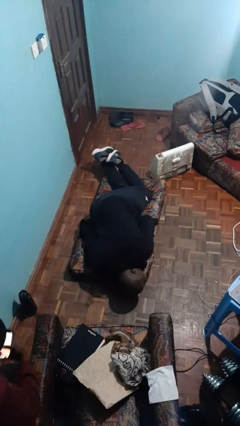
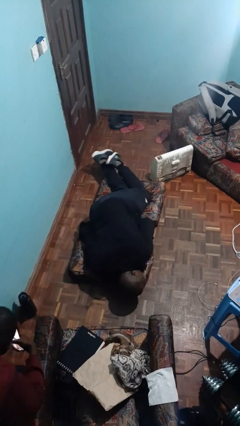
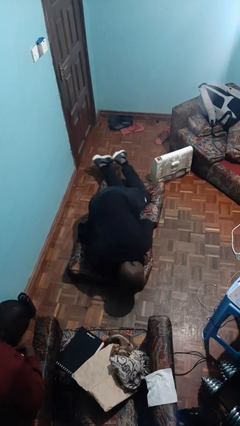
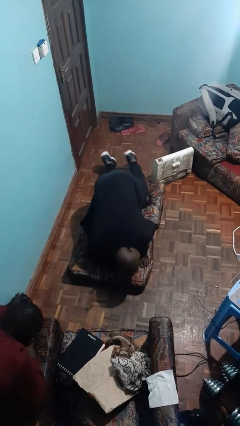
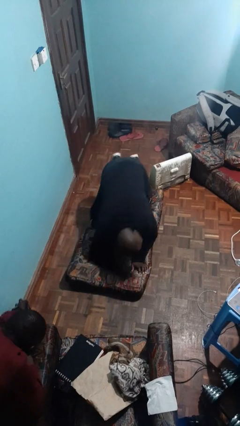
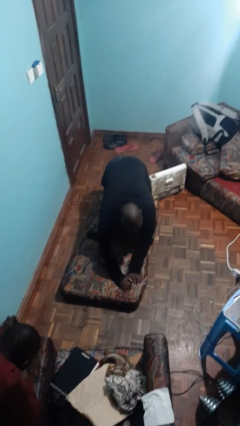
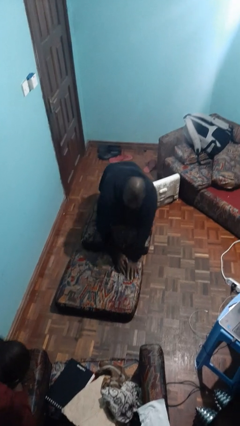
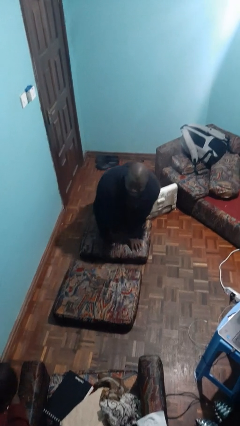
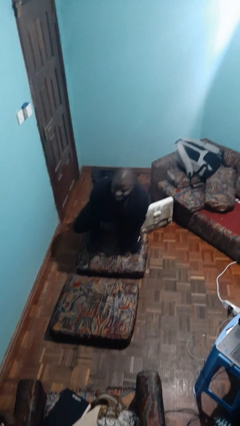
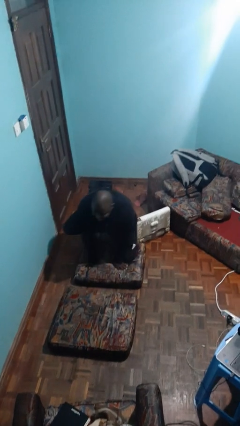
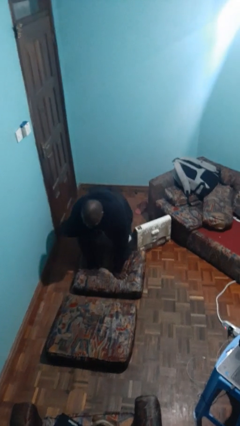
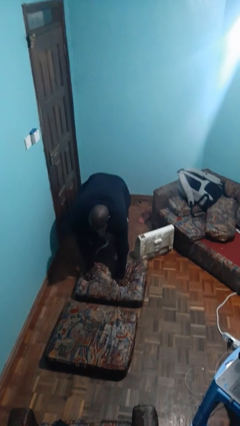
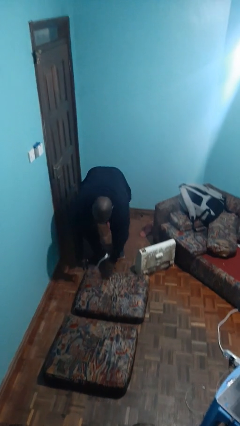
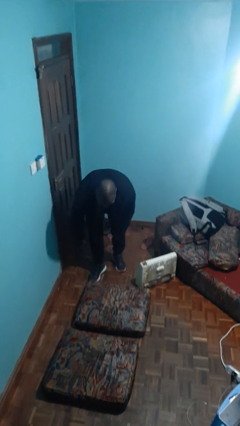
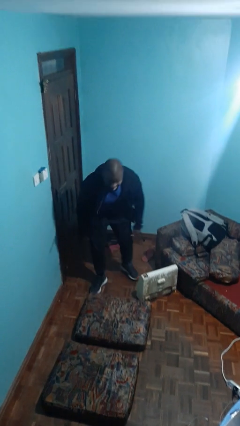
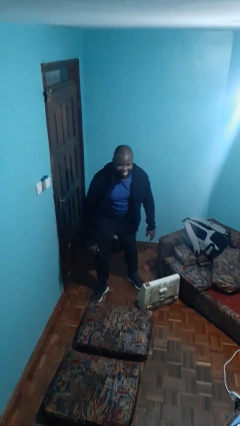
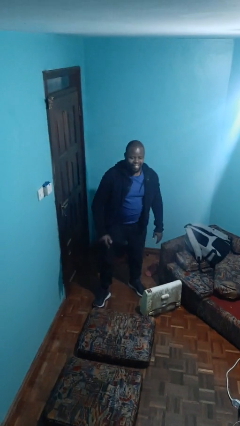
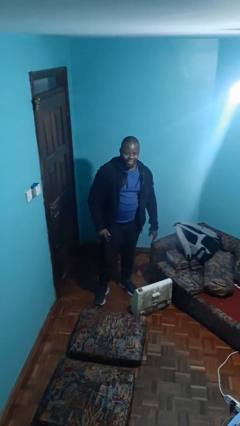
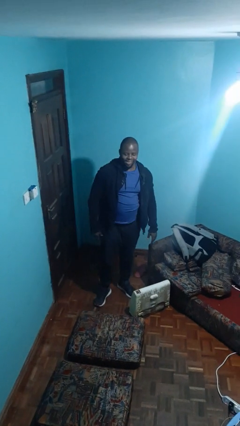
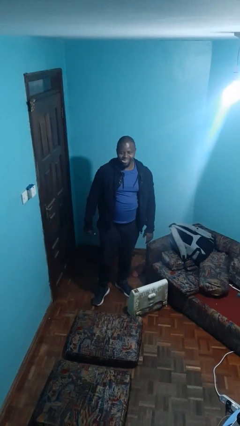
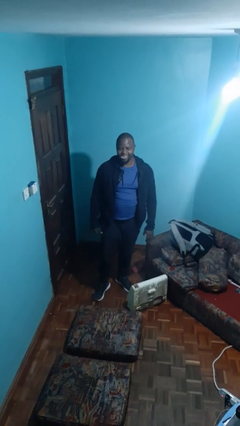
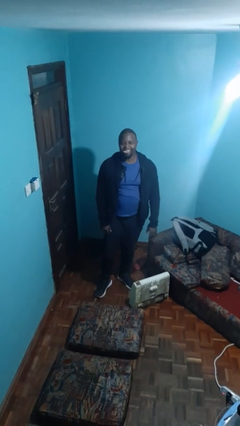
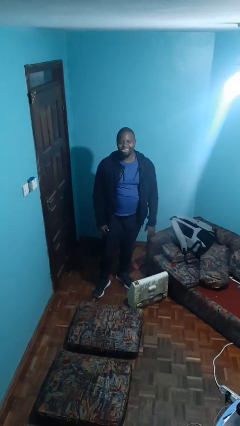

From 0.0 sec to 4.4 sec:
person stands up from floor

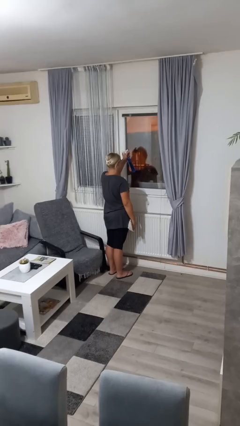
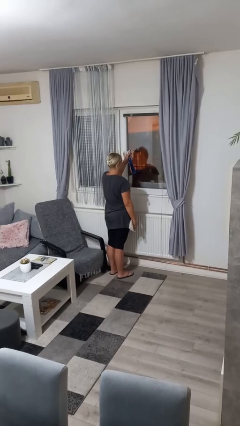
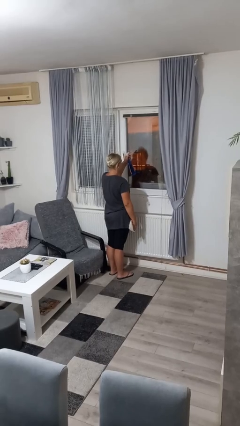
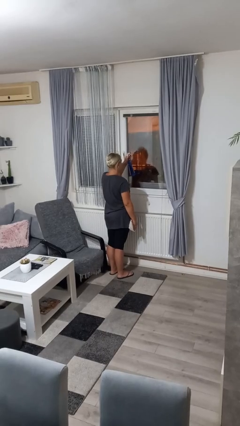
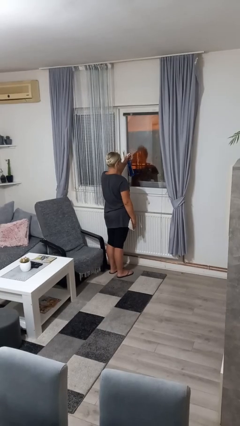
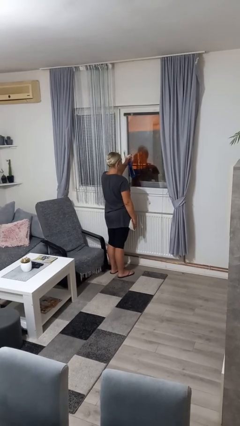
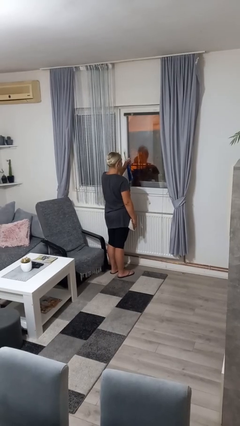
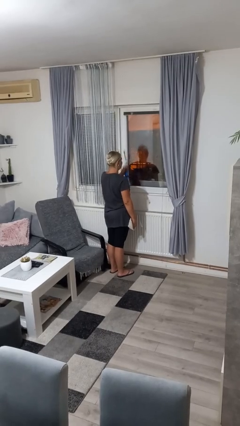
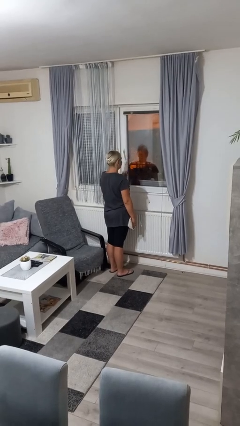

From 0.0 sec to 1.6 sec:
person sprays from bottle

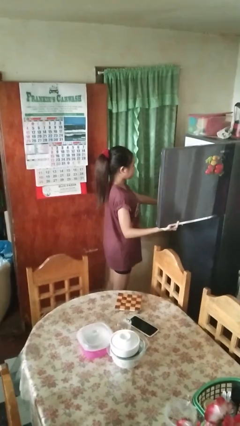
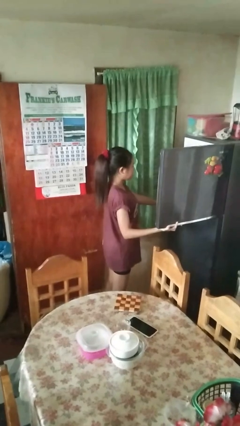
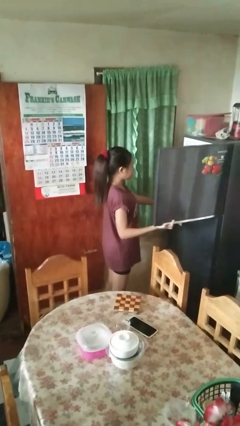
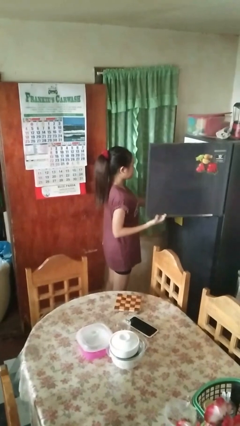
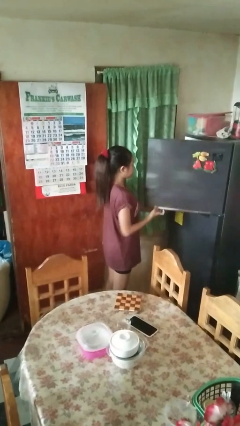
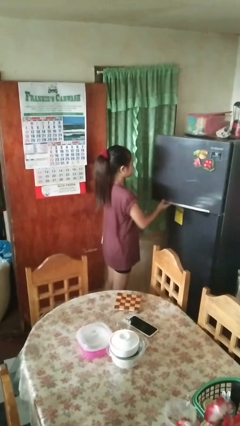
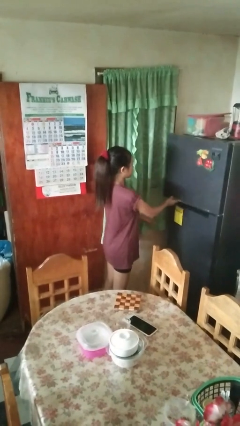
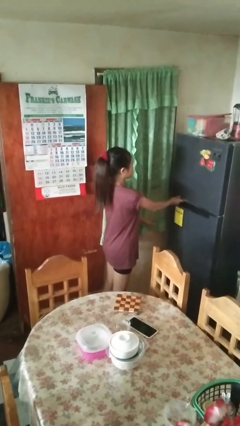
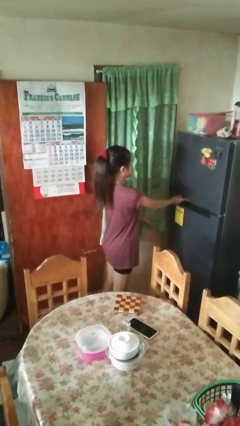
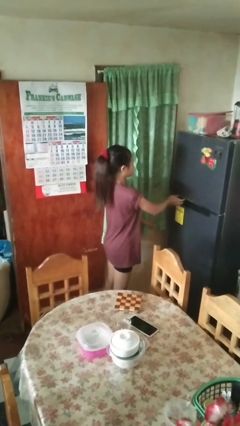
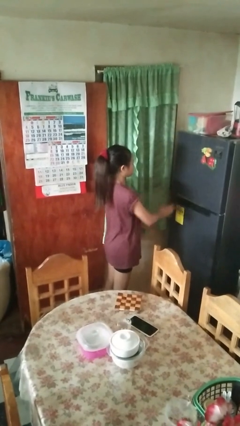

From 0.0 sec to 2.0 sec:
person closes refrigerator

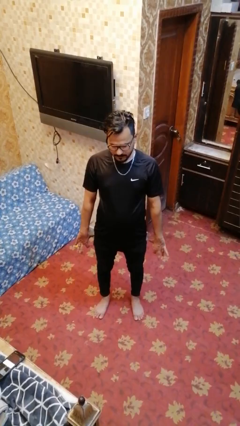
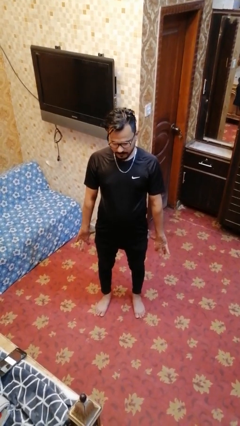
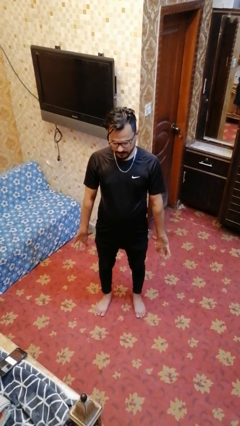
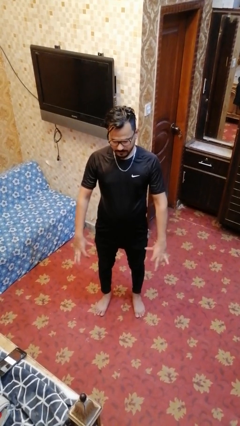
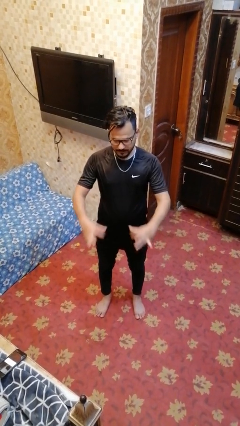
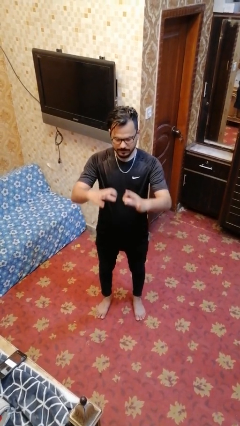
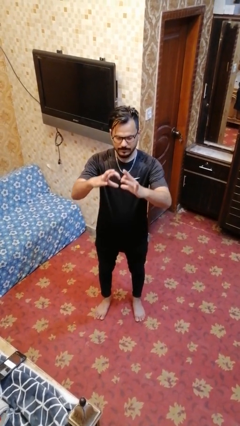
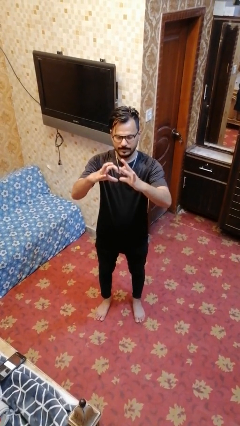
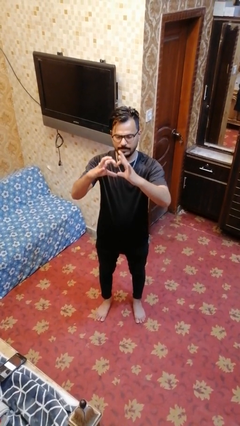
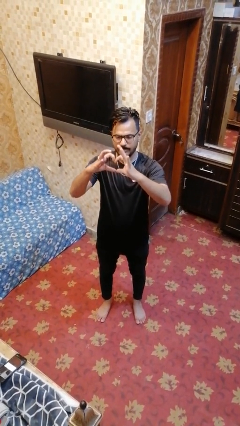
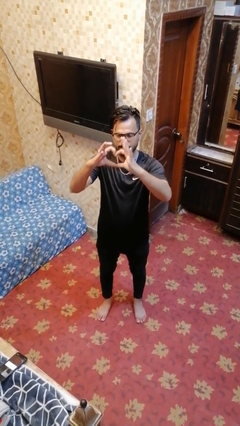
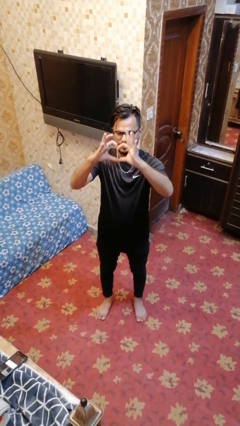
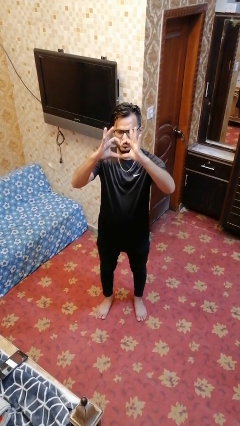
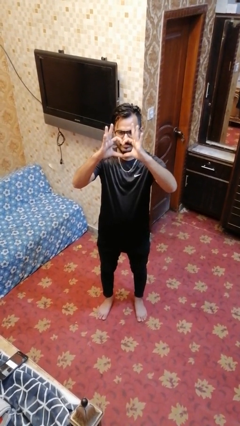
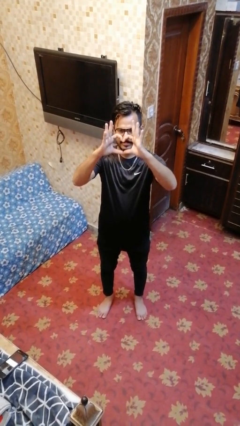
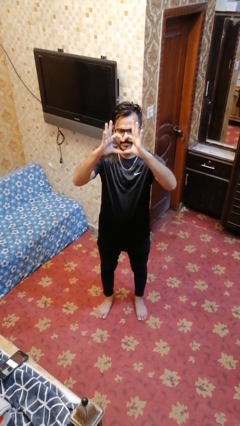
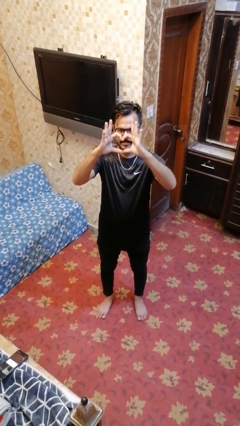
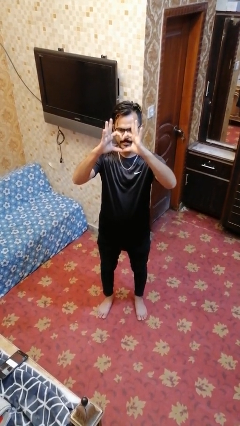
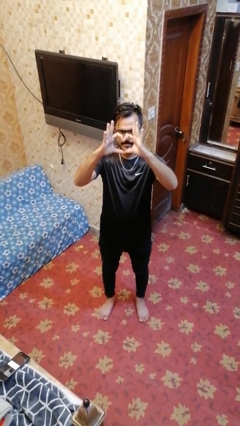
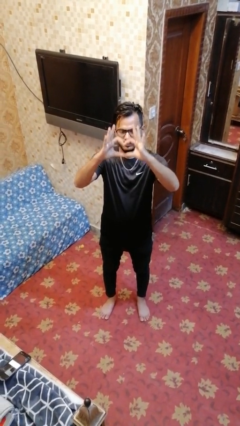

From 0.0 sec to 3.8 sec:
person gestures heart

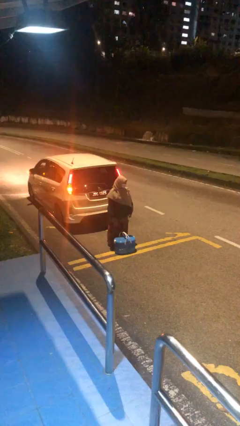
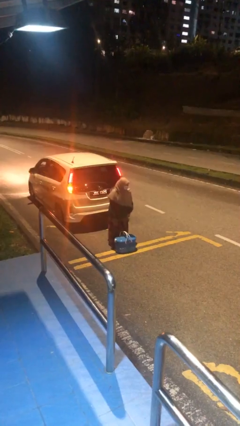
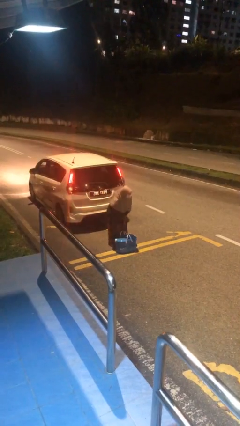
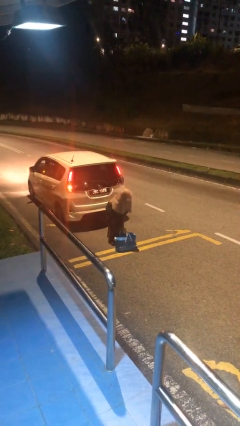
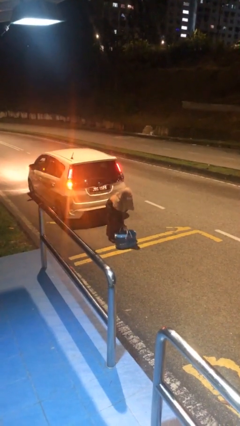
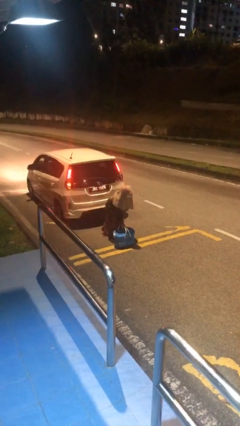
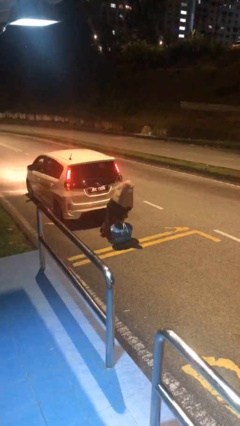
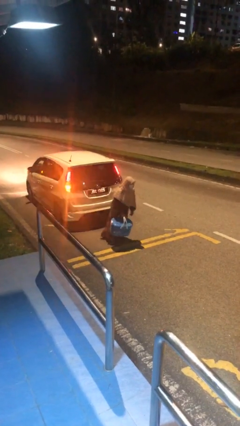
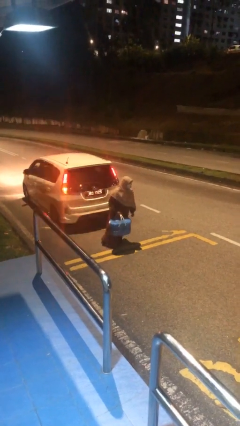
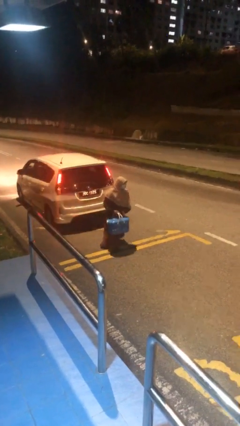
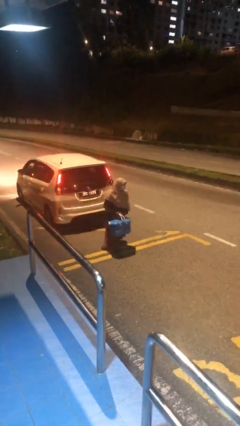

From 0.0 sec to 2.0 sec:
person picks up object from floor

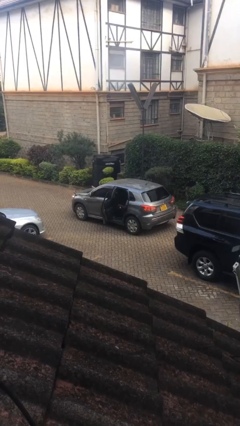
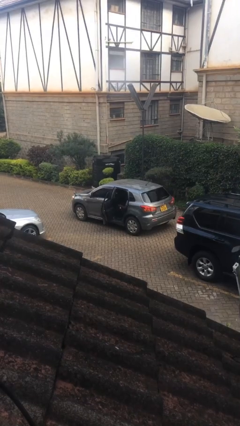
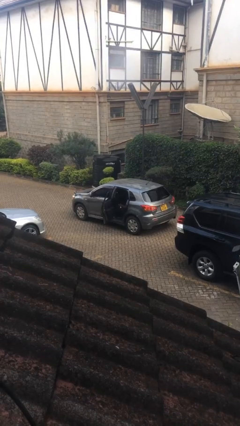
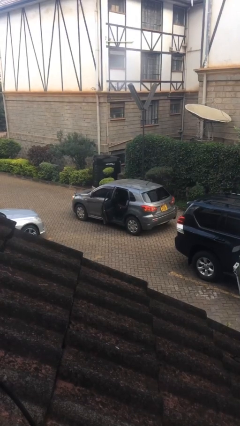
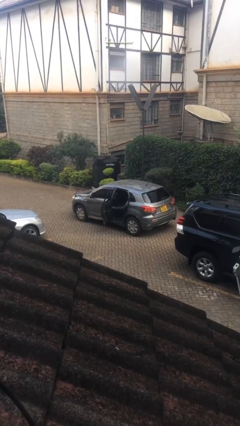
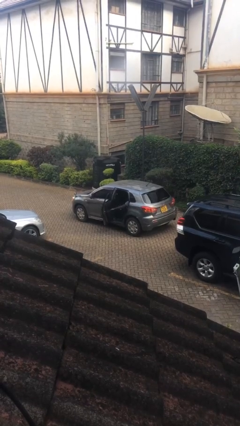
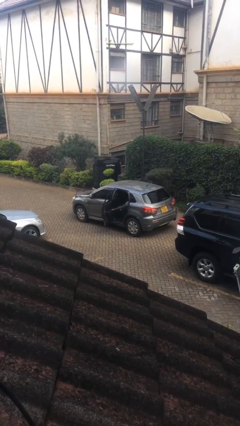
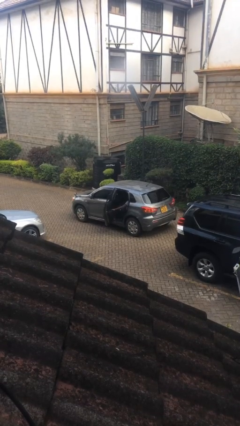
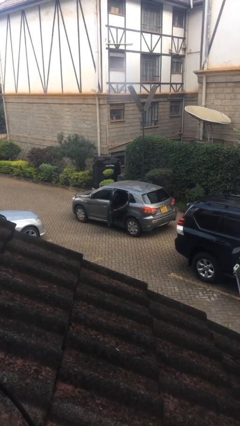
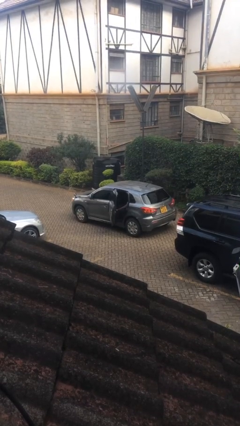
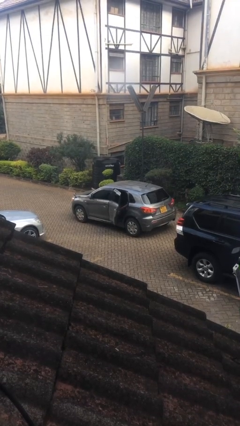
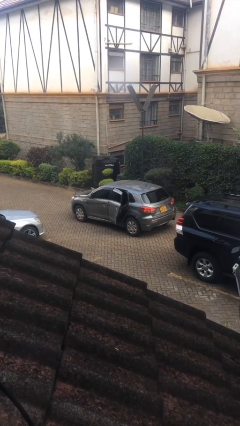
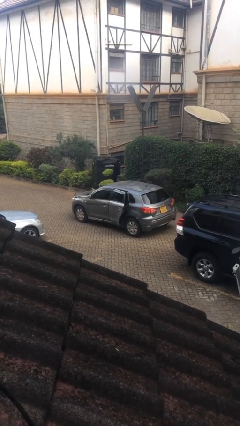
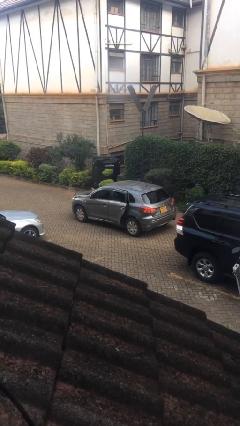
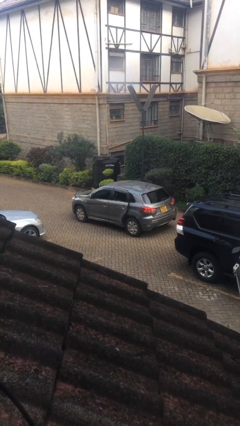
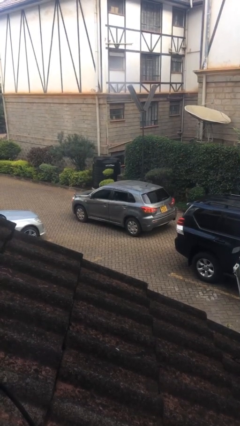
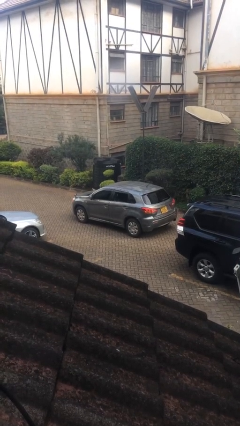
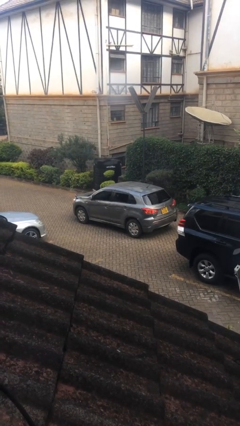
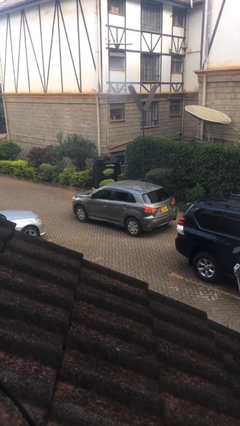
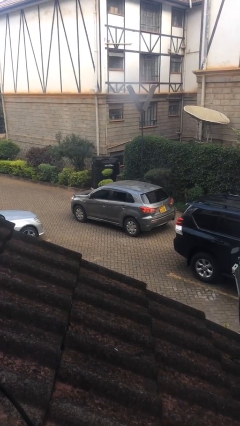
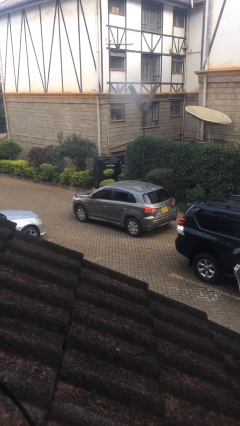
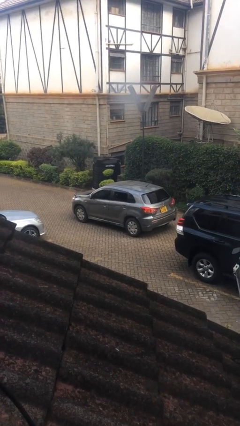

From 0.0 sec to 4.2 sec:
person closes car door
